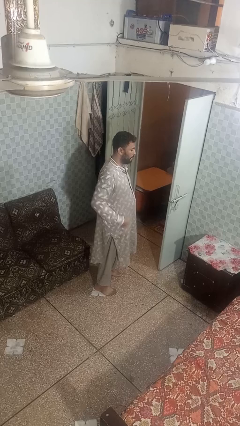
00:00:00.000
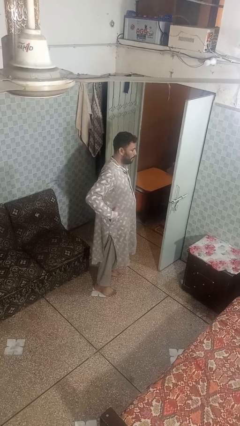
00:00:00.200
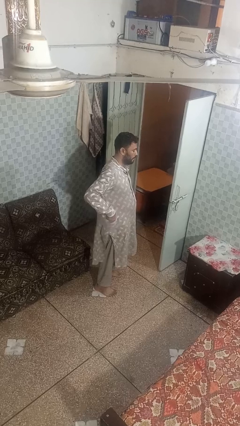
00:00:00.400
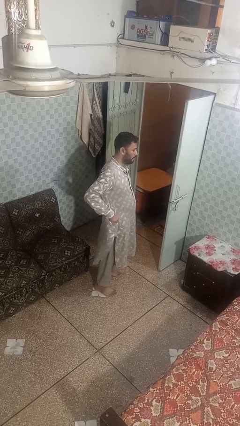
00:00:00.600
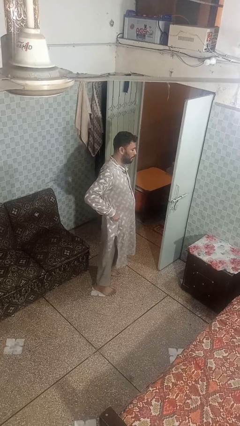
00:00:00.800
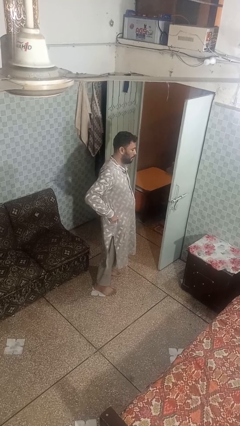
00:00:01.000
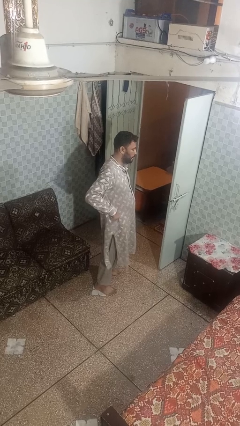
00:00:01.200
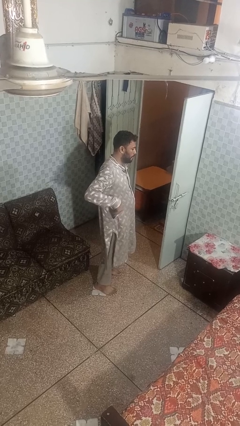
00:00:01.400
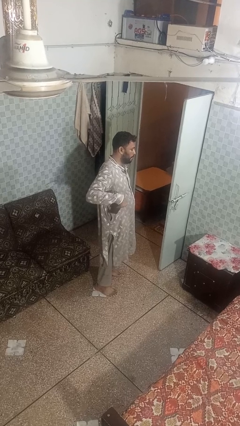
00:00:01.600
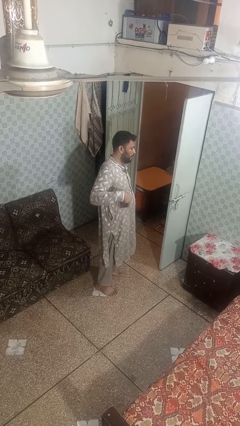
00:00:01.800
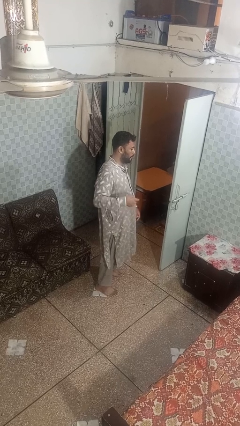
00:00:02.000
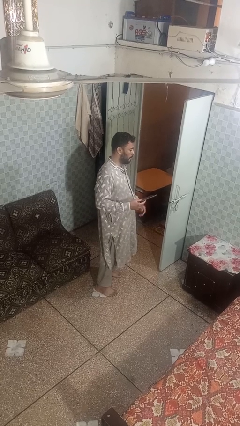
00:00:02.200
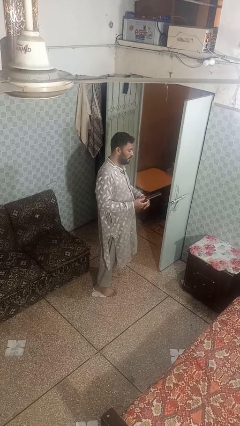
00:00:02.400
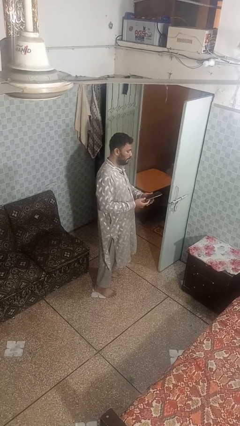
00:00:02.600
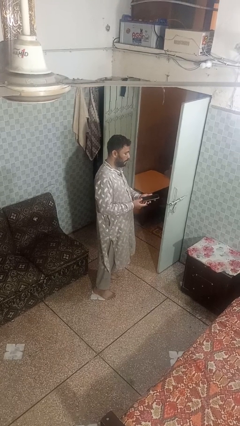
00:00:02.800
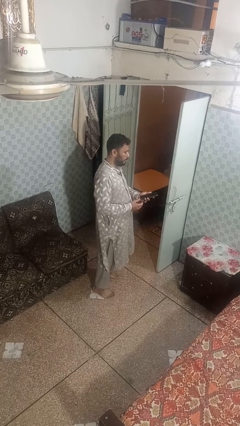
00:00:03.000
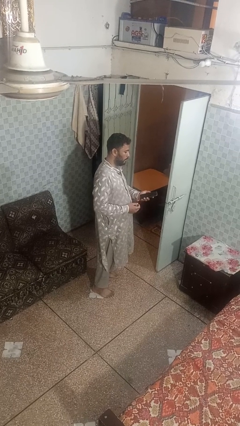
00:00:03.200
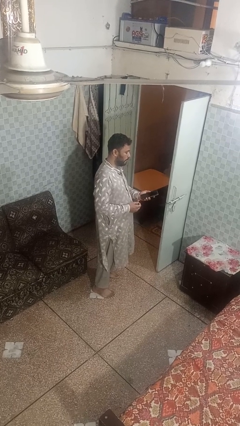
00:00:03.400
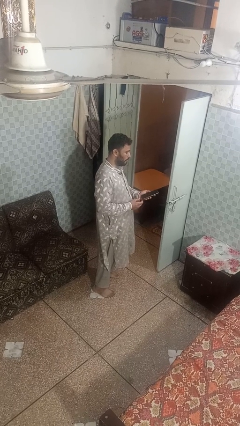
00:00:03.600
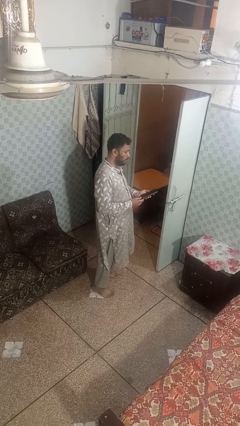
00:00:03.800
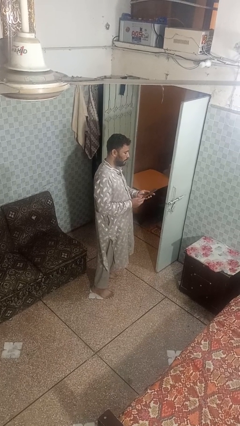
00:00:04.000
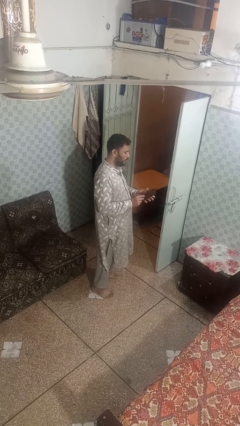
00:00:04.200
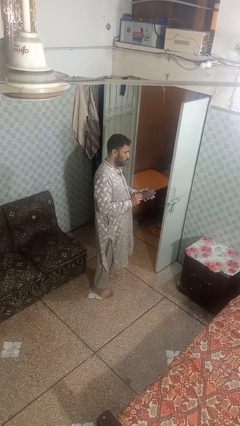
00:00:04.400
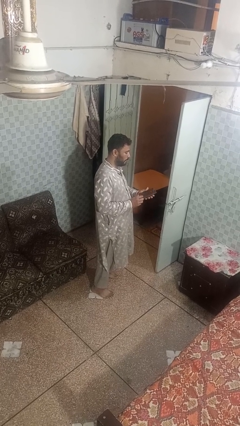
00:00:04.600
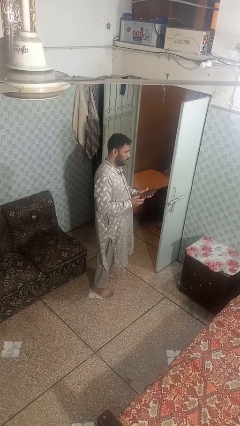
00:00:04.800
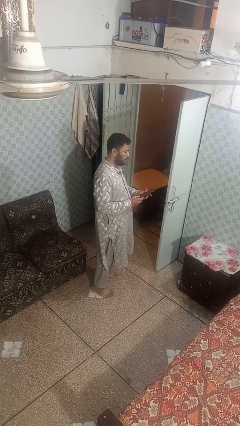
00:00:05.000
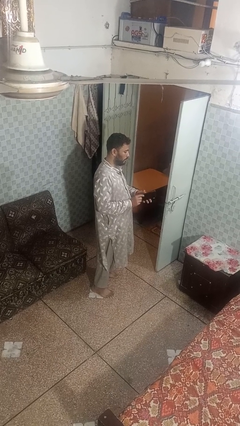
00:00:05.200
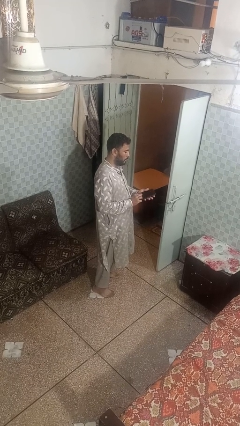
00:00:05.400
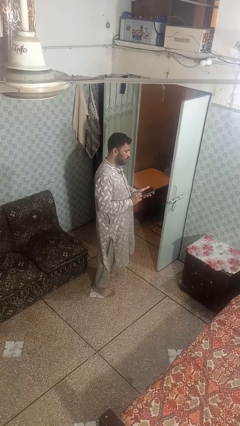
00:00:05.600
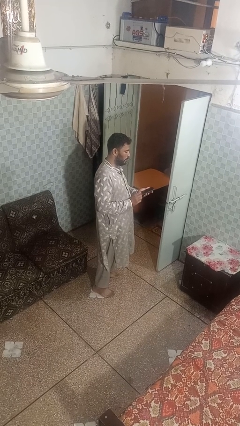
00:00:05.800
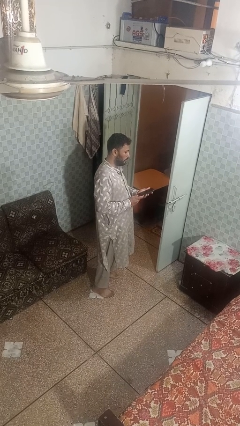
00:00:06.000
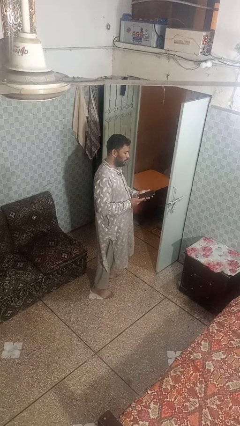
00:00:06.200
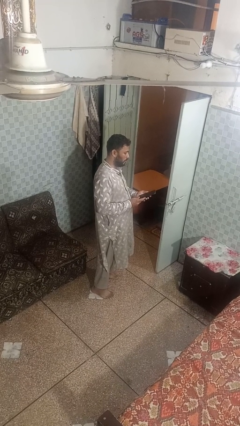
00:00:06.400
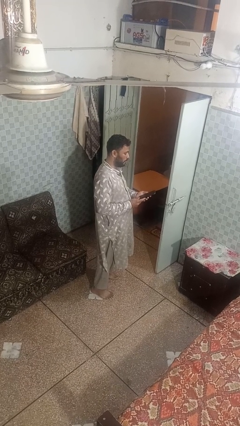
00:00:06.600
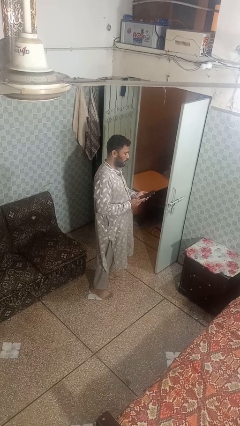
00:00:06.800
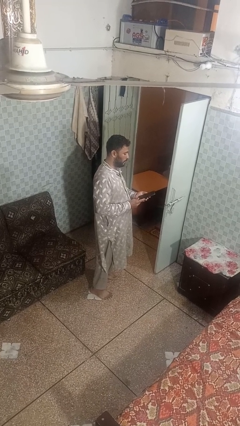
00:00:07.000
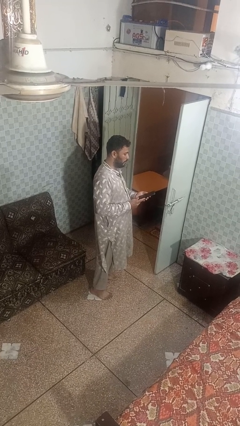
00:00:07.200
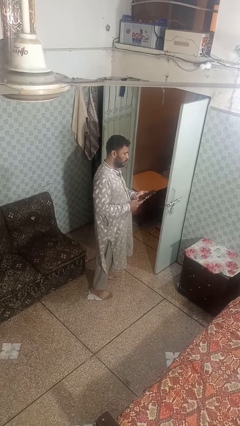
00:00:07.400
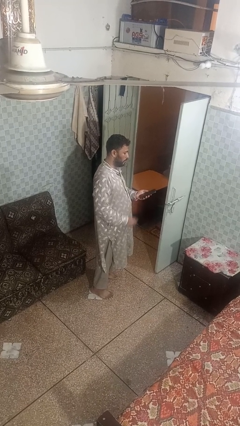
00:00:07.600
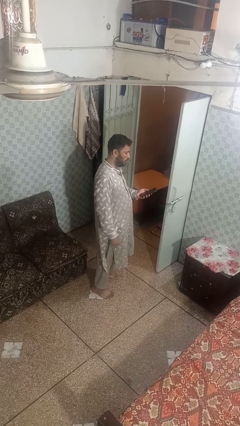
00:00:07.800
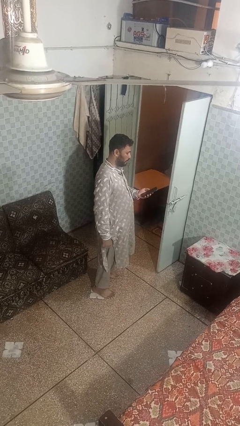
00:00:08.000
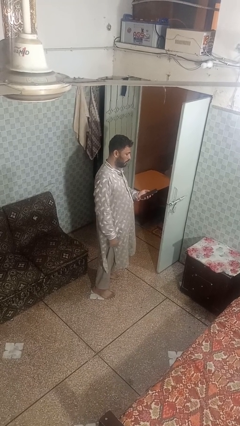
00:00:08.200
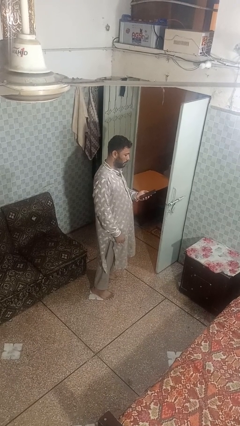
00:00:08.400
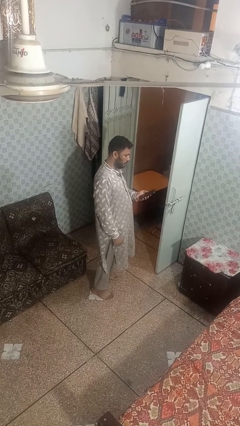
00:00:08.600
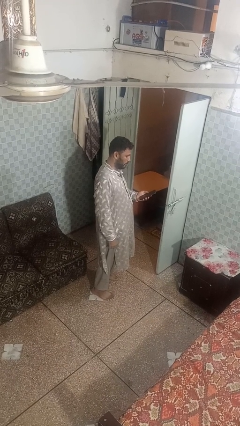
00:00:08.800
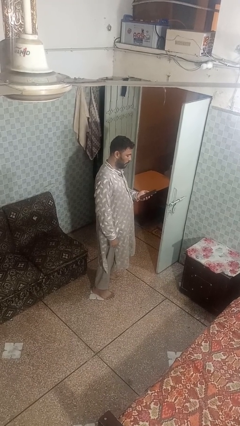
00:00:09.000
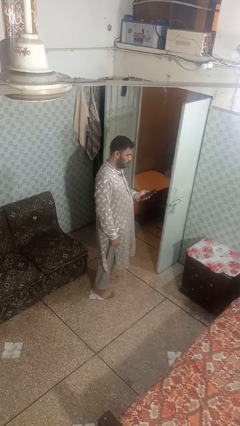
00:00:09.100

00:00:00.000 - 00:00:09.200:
person takes phone from pocket

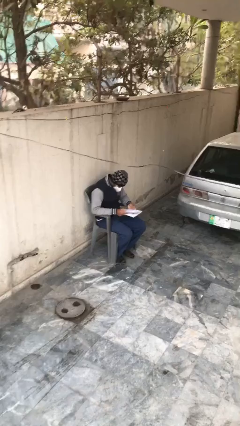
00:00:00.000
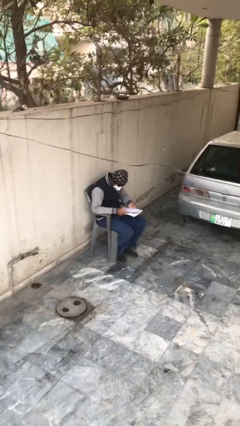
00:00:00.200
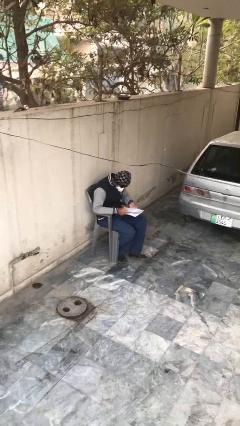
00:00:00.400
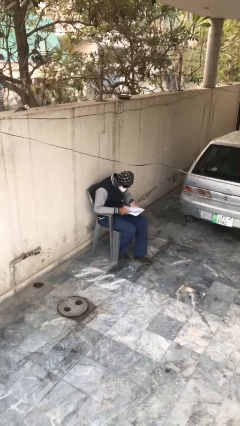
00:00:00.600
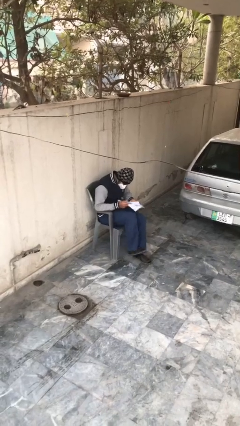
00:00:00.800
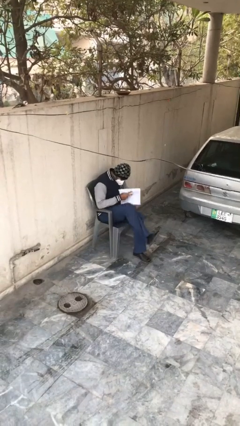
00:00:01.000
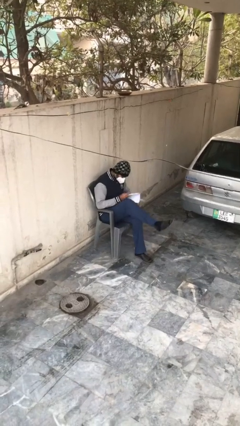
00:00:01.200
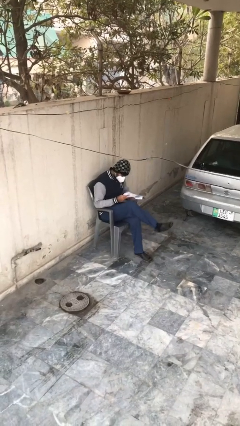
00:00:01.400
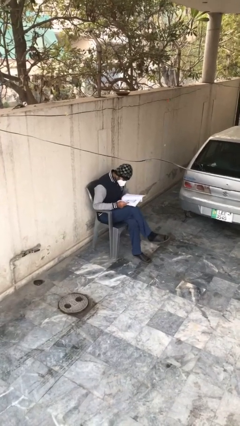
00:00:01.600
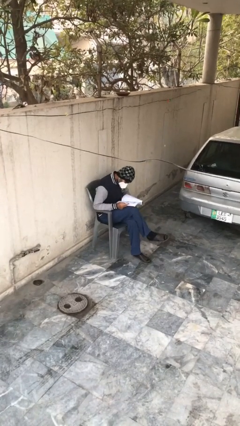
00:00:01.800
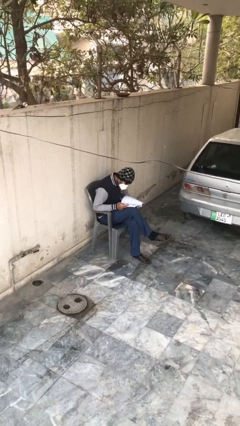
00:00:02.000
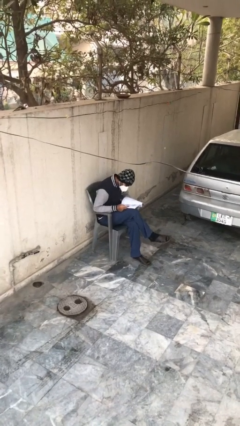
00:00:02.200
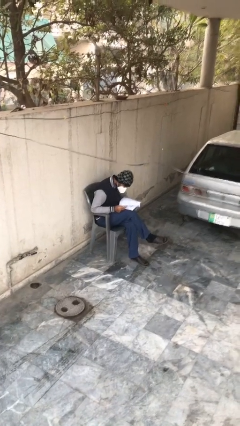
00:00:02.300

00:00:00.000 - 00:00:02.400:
person reads document

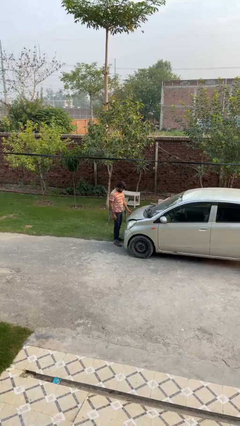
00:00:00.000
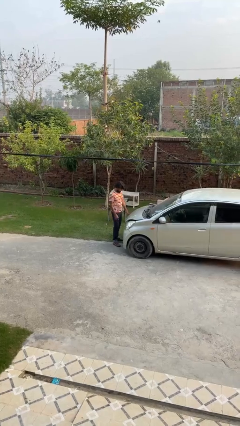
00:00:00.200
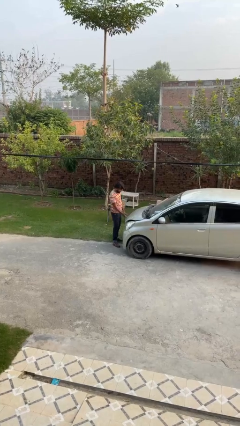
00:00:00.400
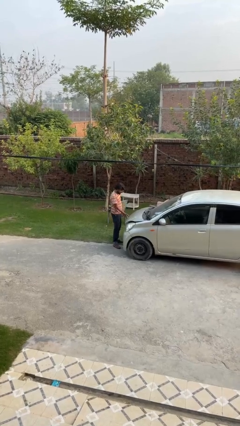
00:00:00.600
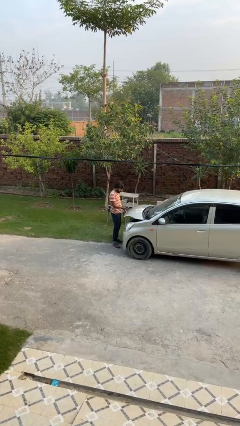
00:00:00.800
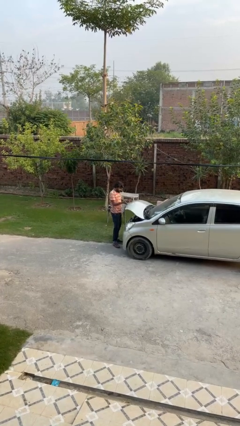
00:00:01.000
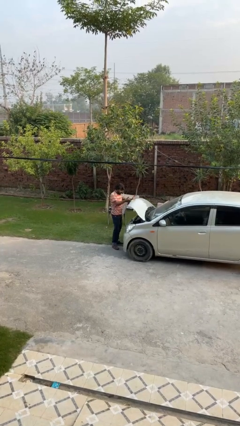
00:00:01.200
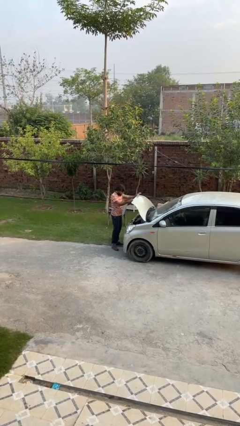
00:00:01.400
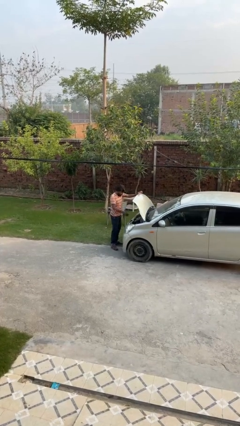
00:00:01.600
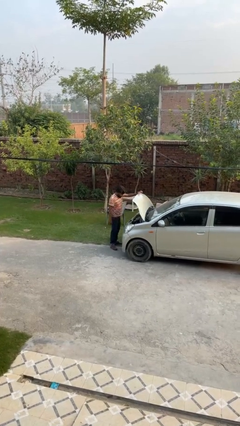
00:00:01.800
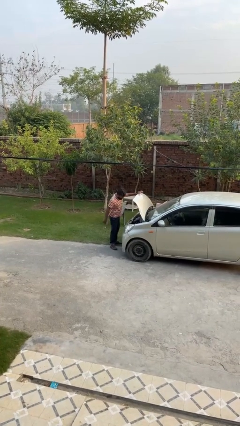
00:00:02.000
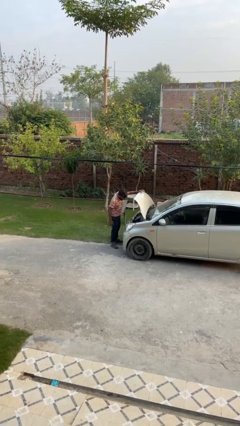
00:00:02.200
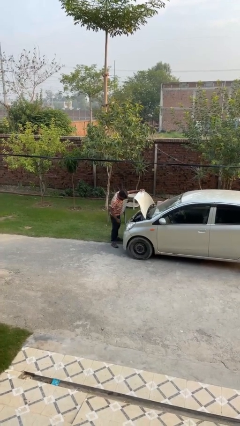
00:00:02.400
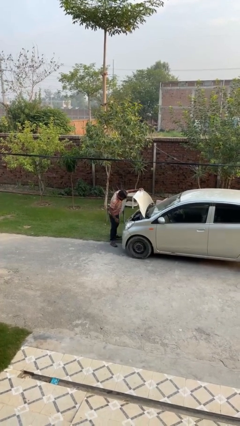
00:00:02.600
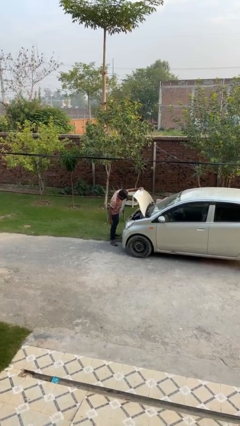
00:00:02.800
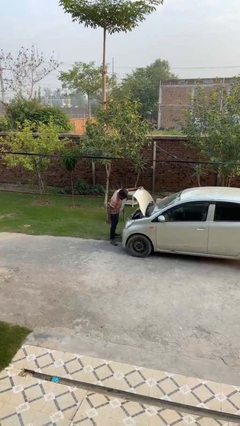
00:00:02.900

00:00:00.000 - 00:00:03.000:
person opens car hood

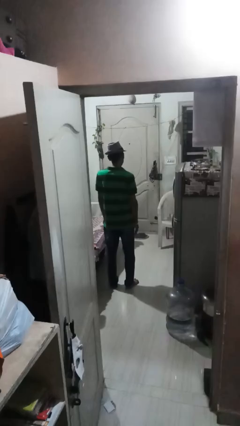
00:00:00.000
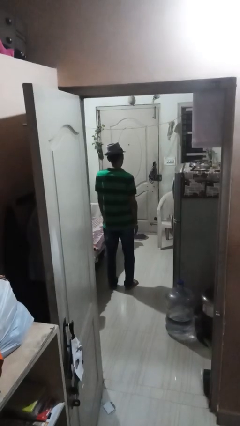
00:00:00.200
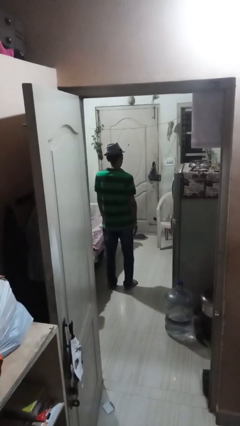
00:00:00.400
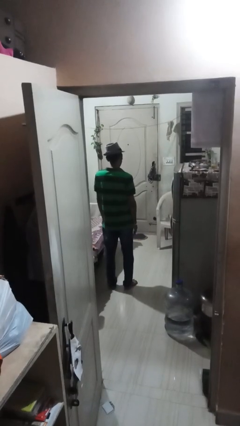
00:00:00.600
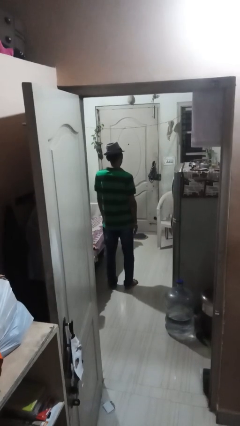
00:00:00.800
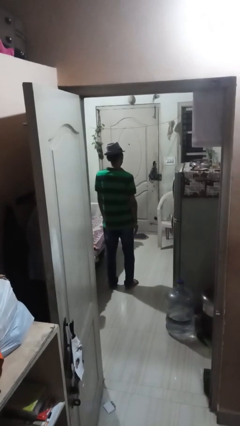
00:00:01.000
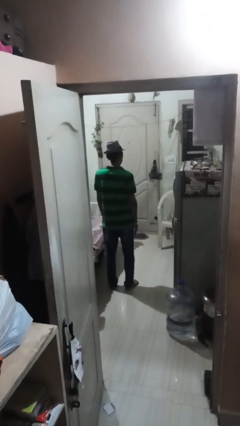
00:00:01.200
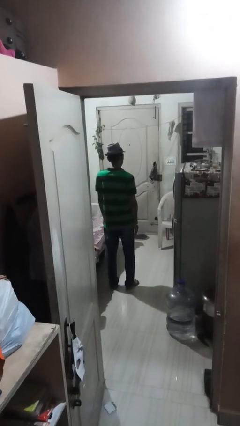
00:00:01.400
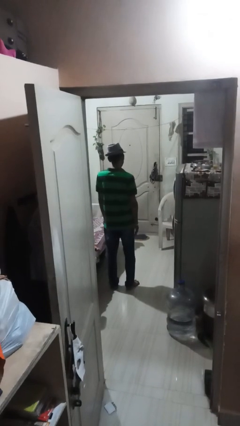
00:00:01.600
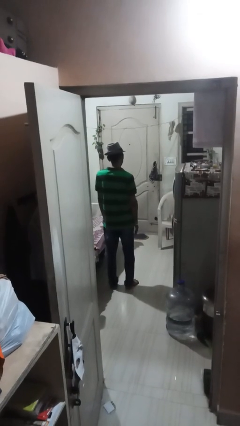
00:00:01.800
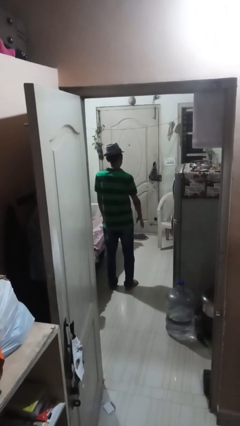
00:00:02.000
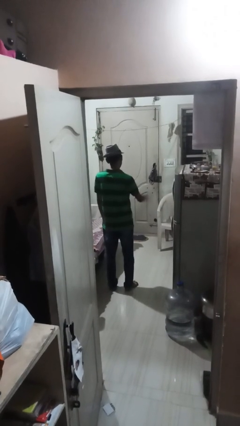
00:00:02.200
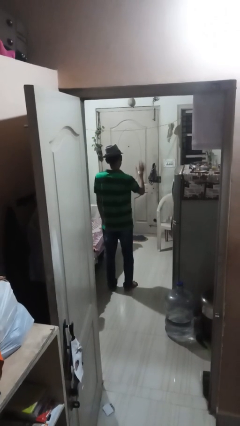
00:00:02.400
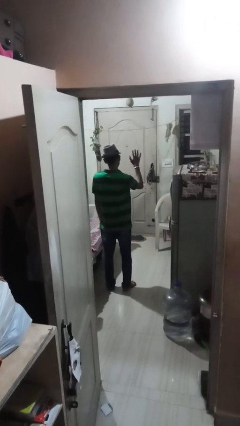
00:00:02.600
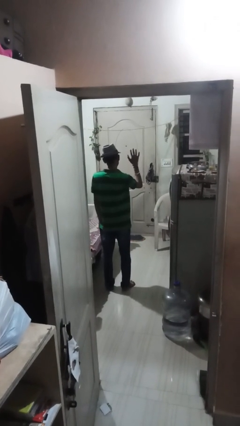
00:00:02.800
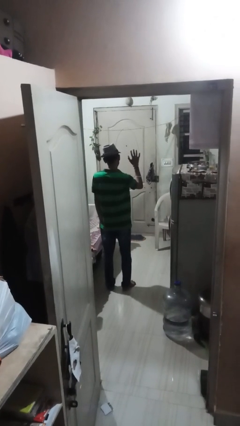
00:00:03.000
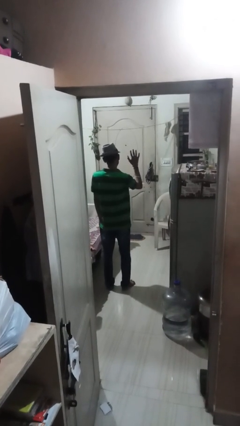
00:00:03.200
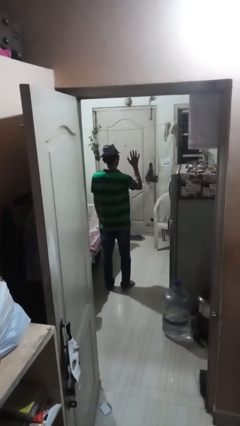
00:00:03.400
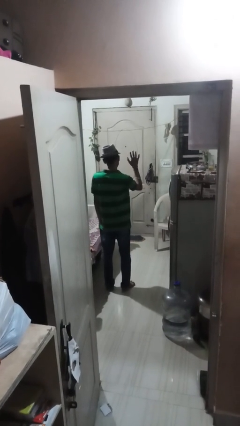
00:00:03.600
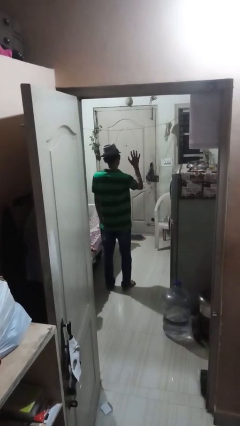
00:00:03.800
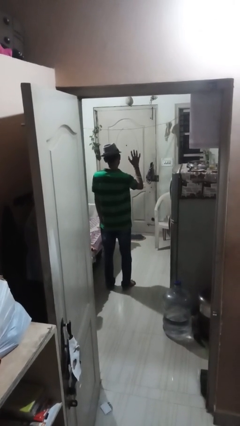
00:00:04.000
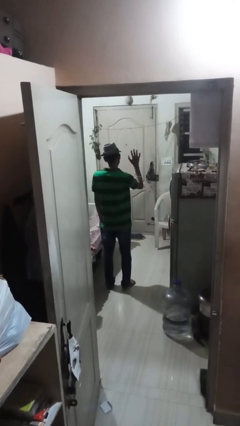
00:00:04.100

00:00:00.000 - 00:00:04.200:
person gestures number five
